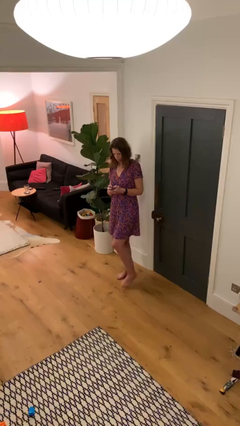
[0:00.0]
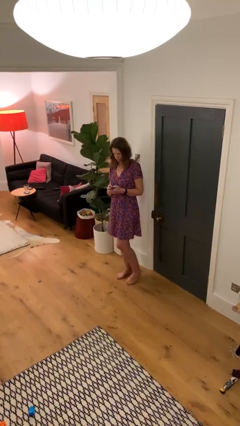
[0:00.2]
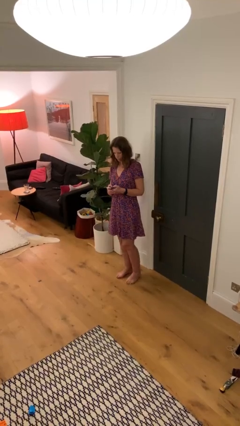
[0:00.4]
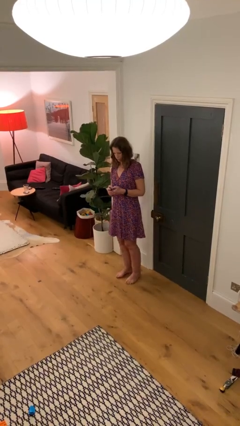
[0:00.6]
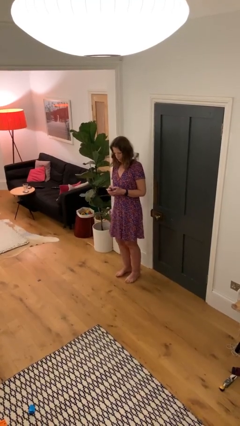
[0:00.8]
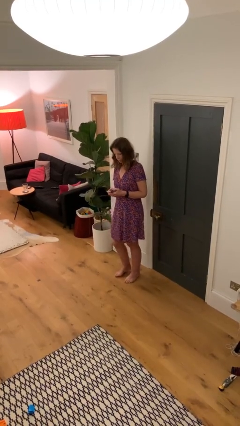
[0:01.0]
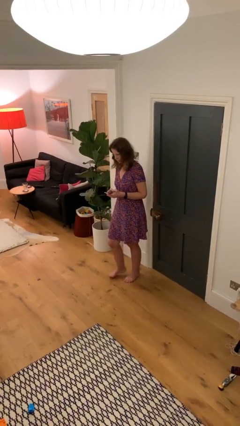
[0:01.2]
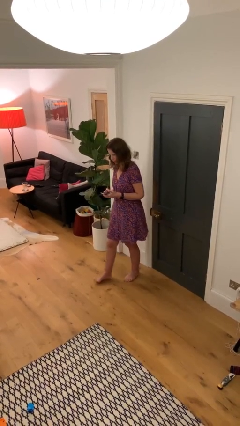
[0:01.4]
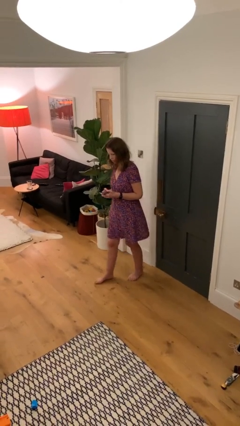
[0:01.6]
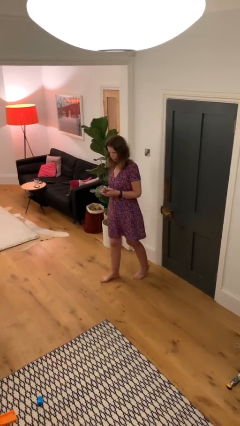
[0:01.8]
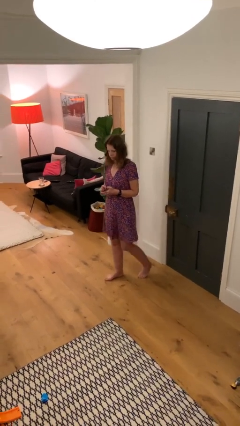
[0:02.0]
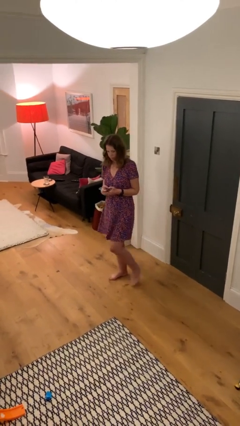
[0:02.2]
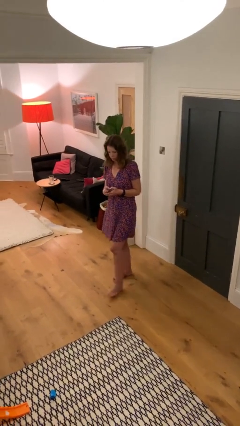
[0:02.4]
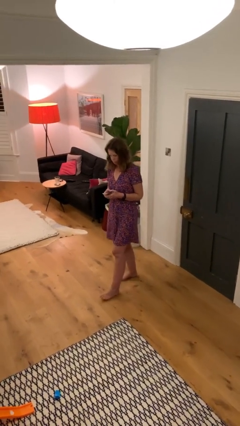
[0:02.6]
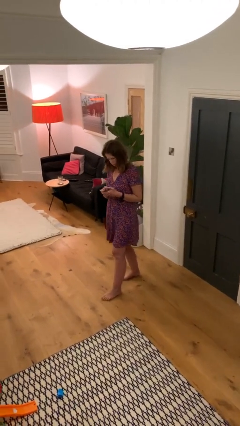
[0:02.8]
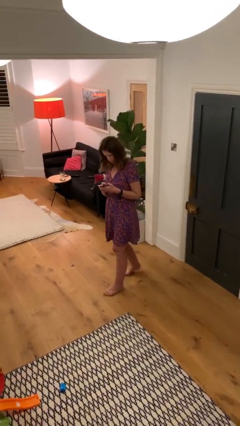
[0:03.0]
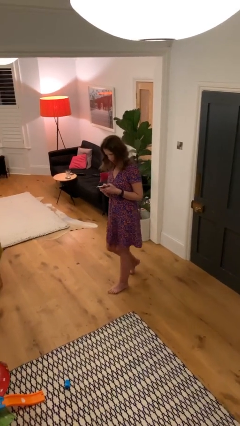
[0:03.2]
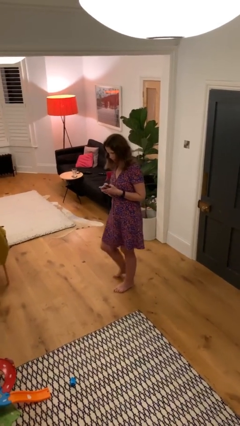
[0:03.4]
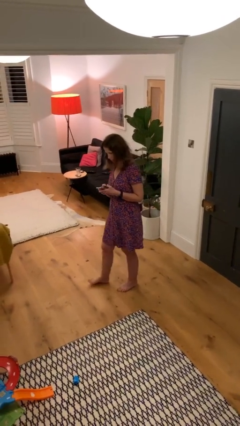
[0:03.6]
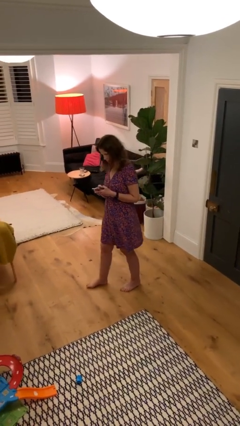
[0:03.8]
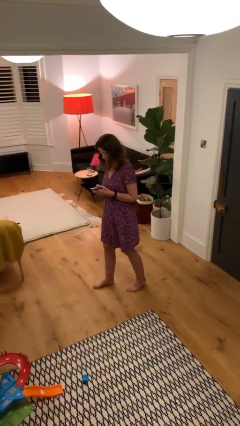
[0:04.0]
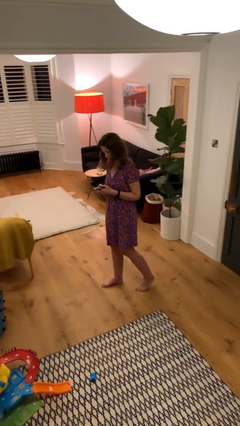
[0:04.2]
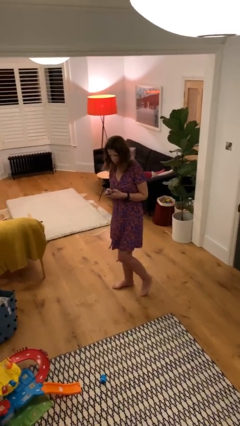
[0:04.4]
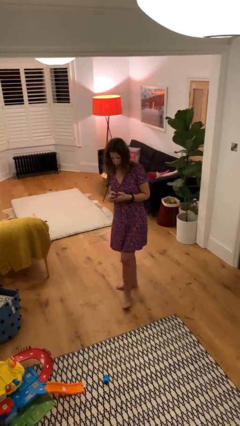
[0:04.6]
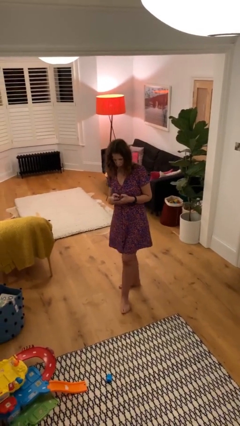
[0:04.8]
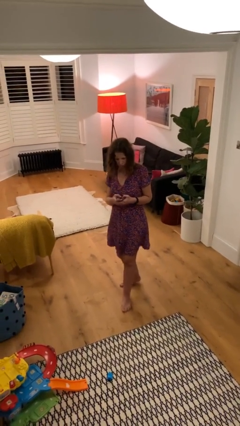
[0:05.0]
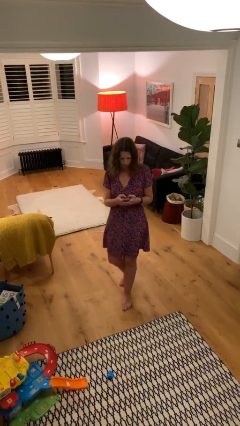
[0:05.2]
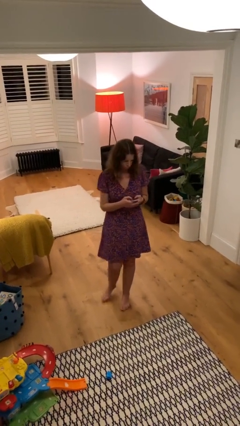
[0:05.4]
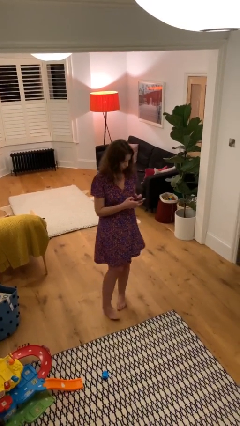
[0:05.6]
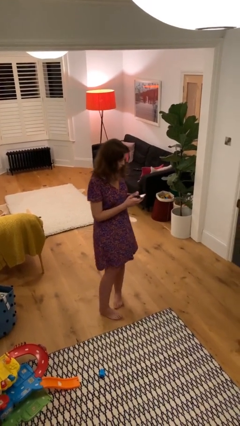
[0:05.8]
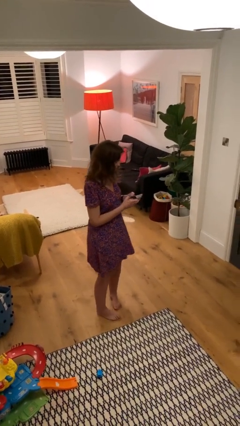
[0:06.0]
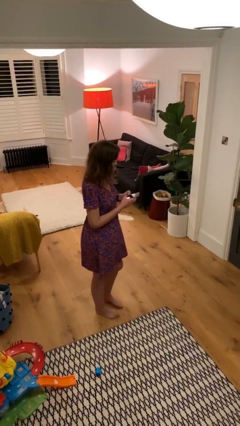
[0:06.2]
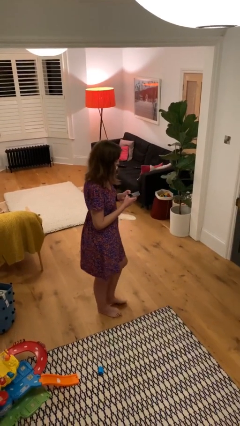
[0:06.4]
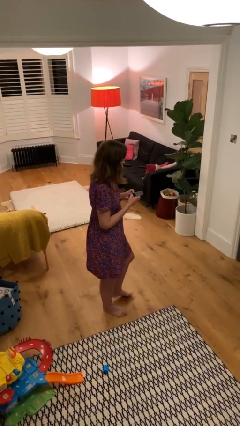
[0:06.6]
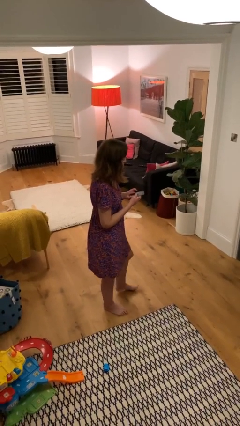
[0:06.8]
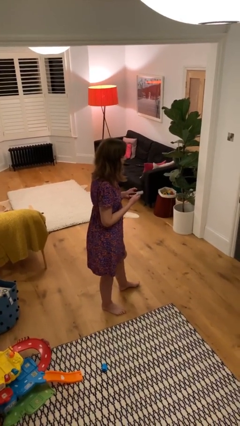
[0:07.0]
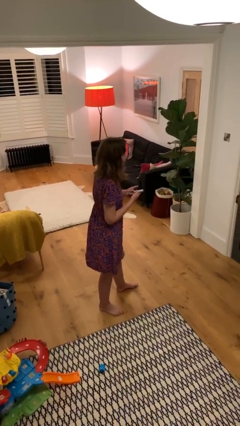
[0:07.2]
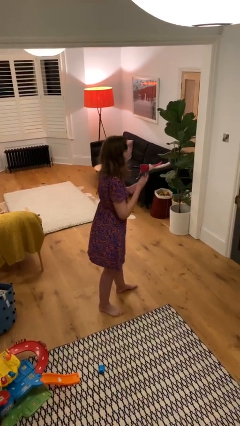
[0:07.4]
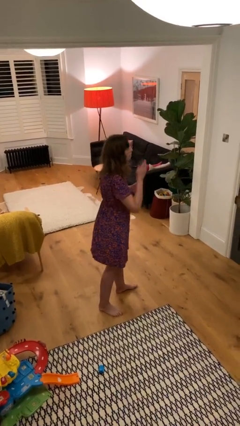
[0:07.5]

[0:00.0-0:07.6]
person texts on phone

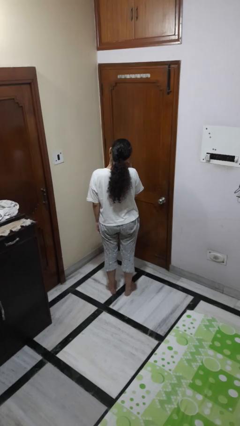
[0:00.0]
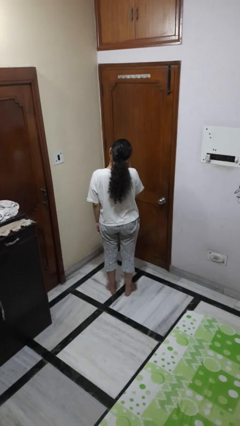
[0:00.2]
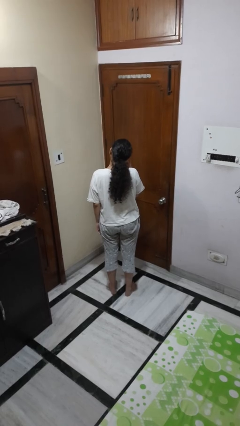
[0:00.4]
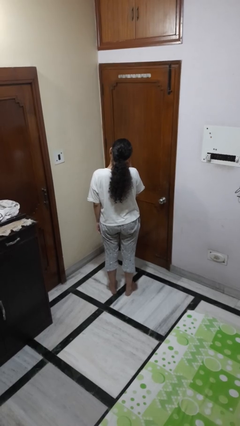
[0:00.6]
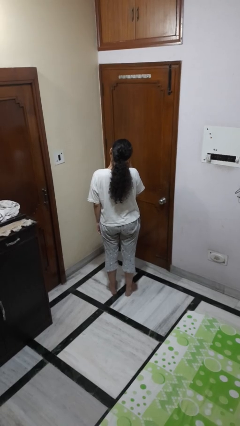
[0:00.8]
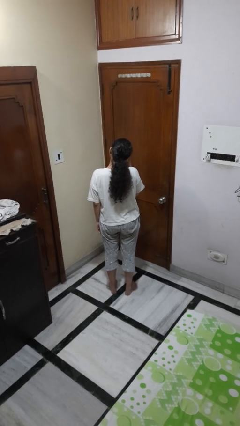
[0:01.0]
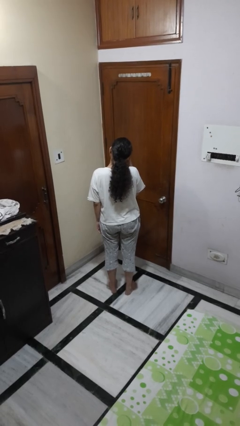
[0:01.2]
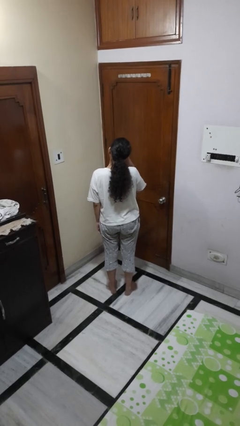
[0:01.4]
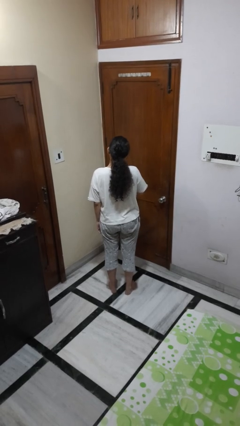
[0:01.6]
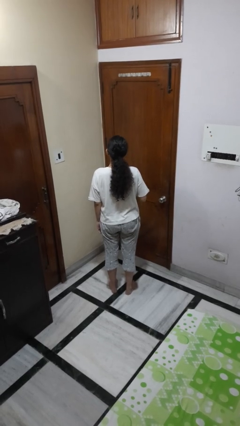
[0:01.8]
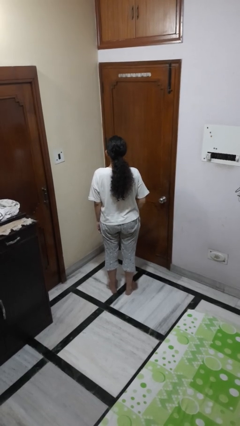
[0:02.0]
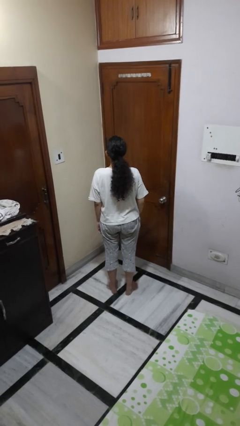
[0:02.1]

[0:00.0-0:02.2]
person gestures call me

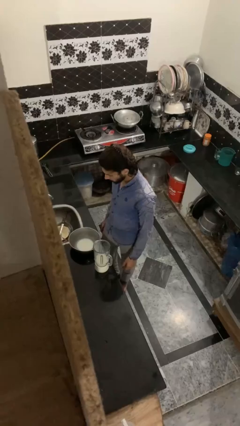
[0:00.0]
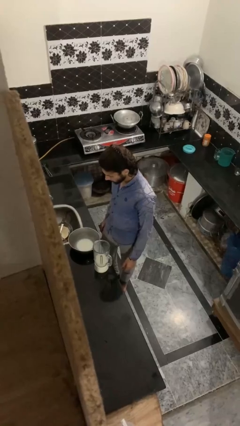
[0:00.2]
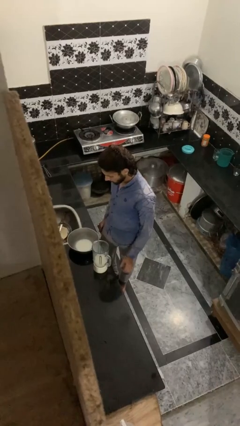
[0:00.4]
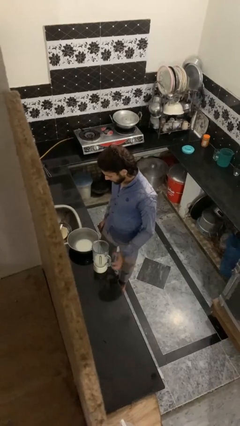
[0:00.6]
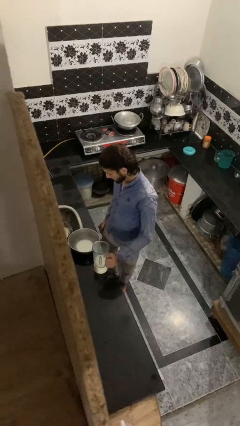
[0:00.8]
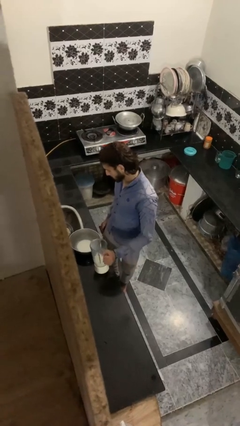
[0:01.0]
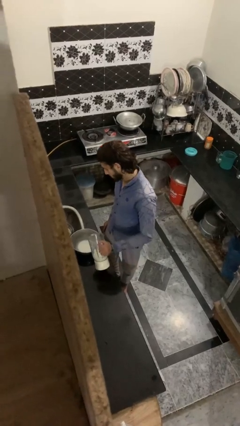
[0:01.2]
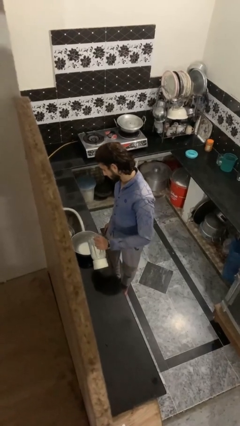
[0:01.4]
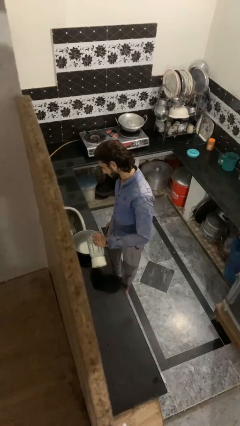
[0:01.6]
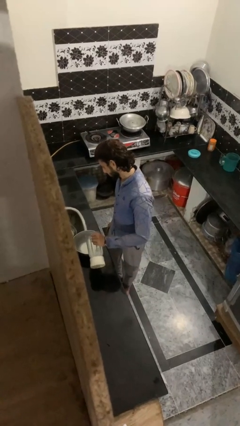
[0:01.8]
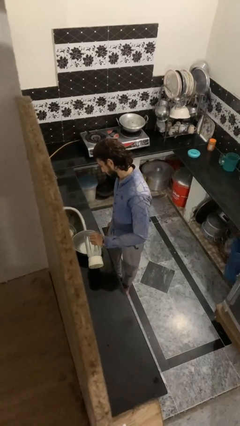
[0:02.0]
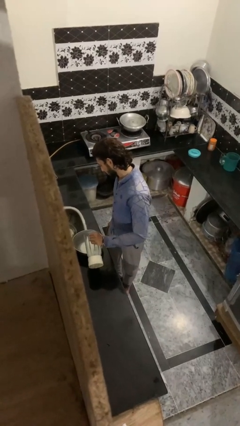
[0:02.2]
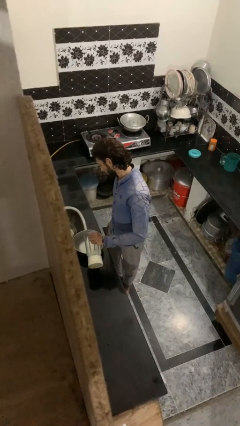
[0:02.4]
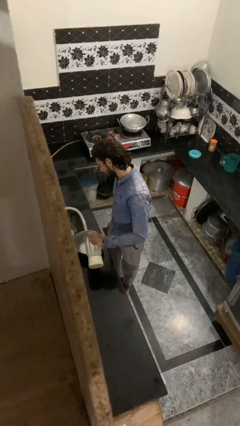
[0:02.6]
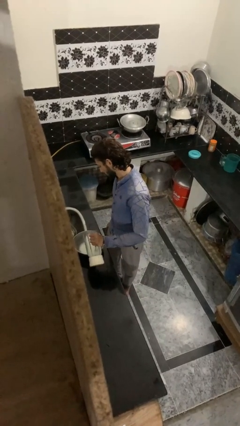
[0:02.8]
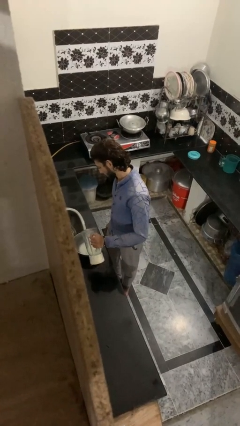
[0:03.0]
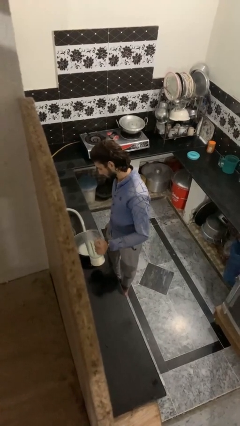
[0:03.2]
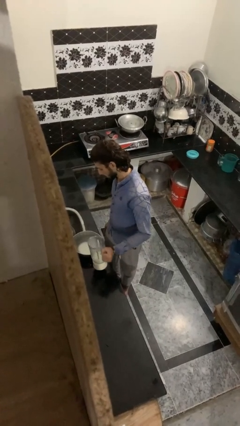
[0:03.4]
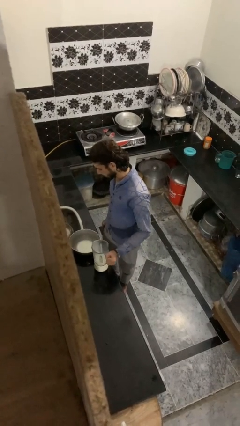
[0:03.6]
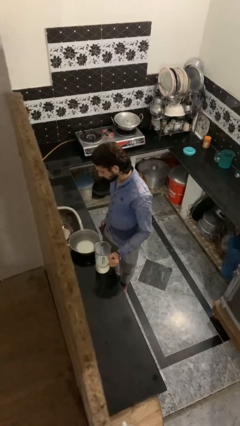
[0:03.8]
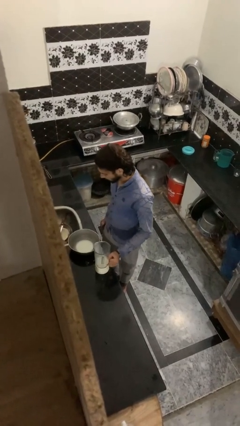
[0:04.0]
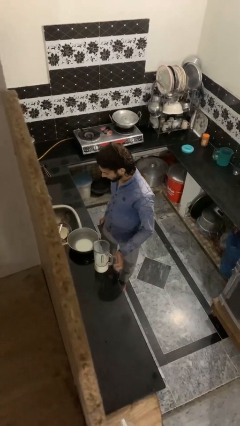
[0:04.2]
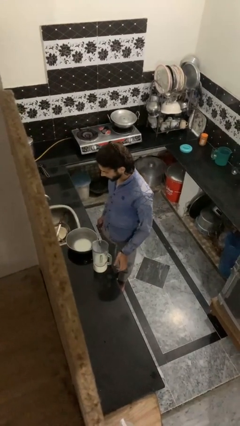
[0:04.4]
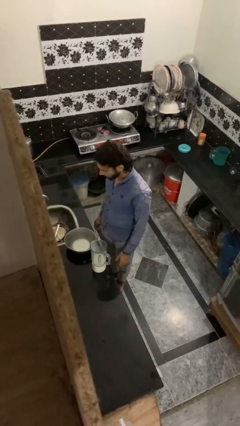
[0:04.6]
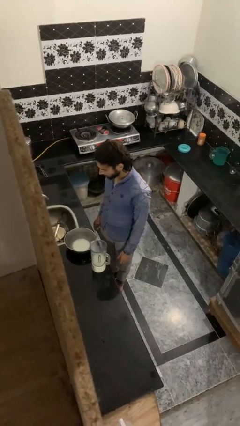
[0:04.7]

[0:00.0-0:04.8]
person pours into bowl

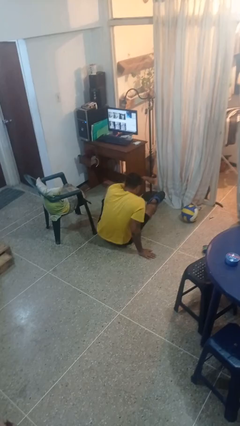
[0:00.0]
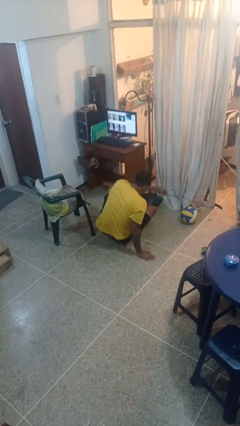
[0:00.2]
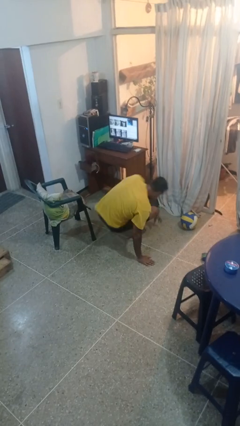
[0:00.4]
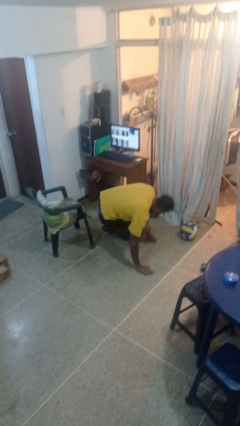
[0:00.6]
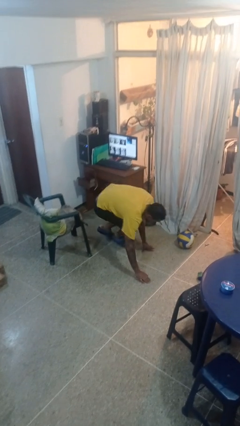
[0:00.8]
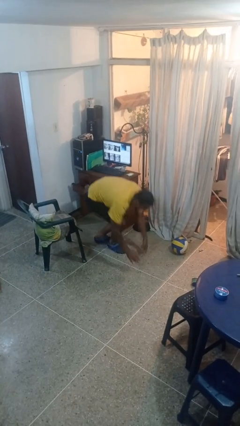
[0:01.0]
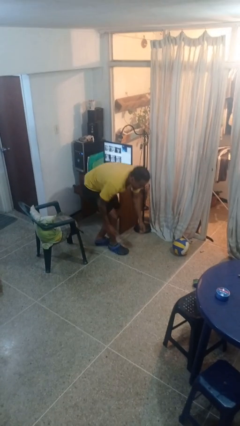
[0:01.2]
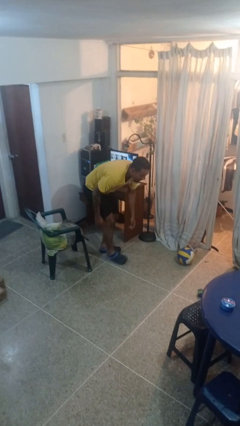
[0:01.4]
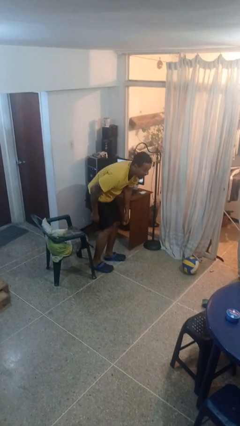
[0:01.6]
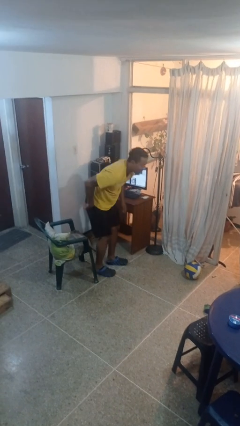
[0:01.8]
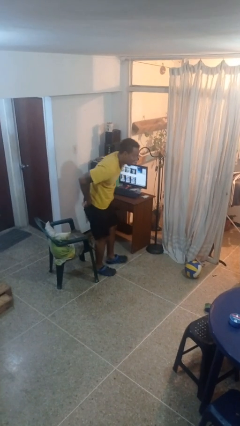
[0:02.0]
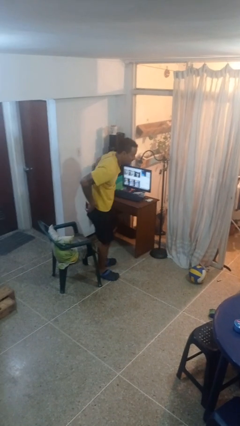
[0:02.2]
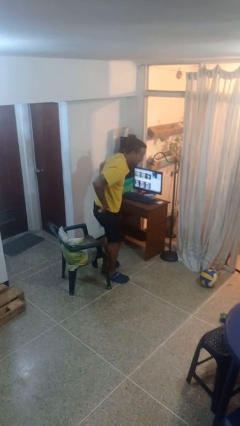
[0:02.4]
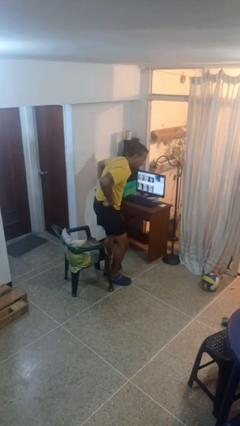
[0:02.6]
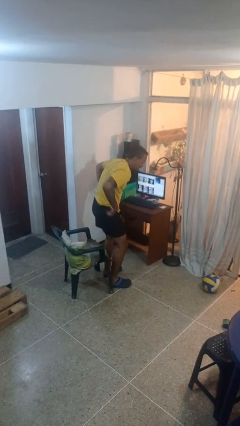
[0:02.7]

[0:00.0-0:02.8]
person stands up from floor

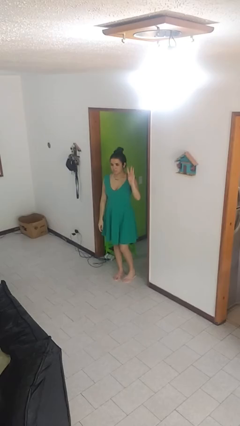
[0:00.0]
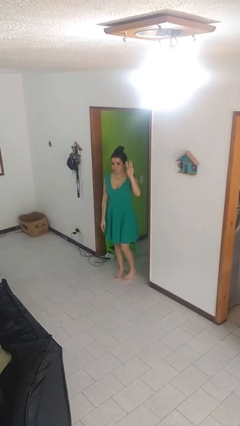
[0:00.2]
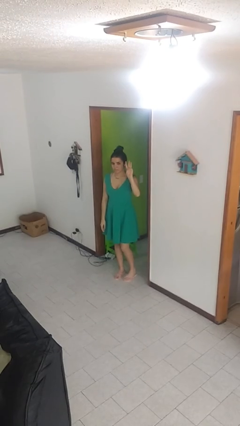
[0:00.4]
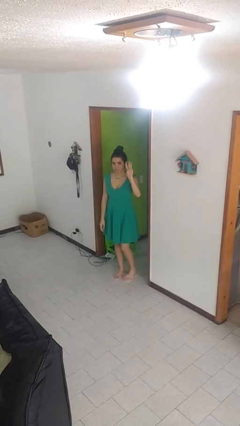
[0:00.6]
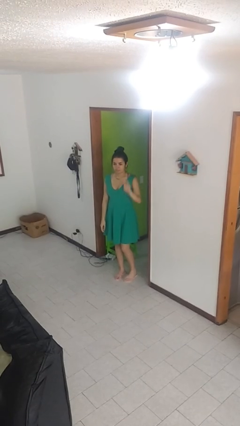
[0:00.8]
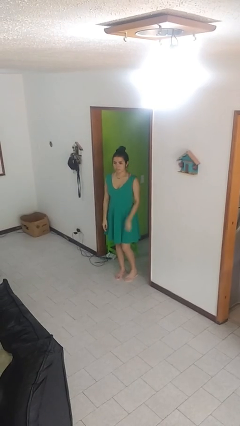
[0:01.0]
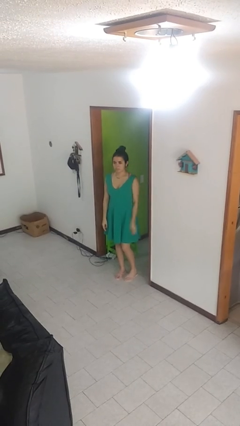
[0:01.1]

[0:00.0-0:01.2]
person gestures number three
